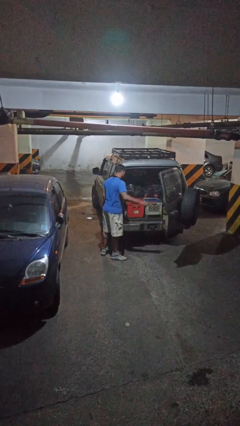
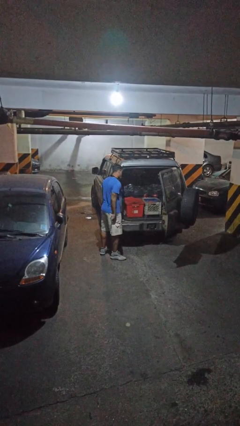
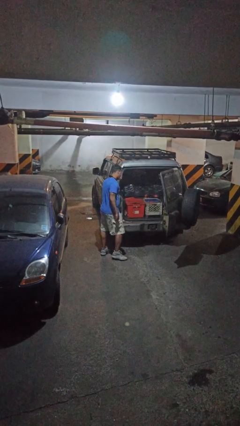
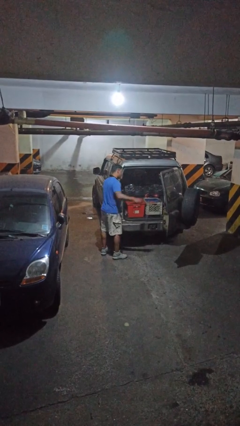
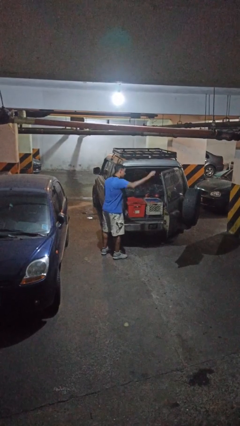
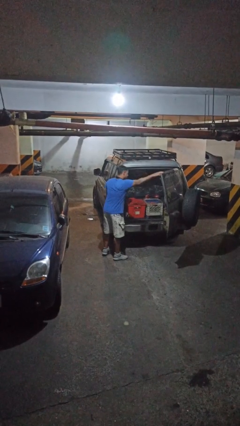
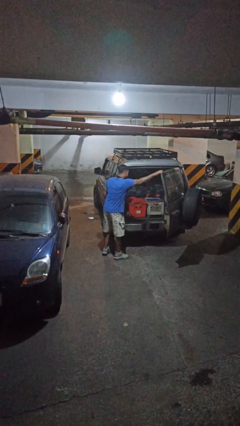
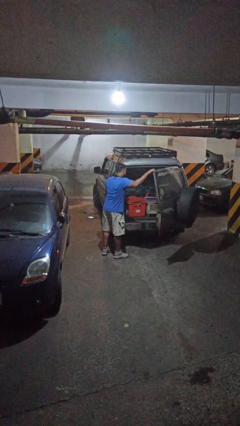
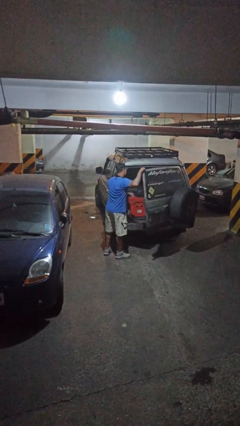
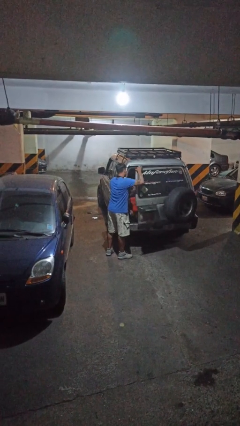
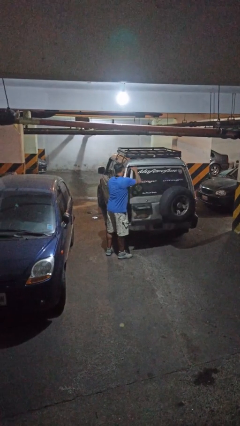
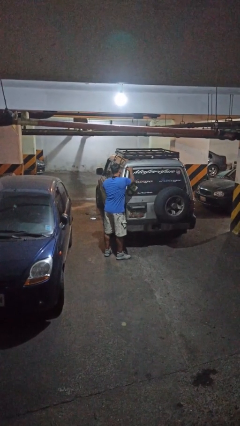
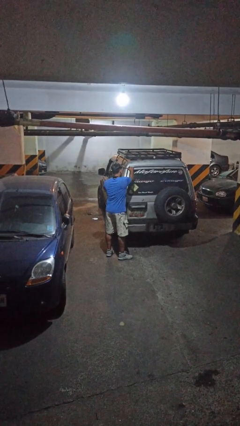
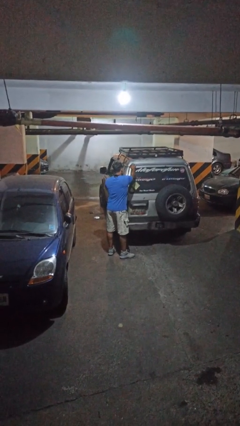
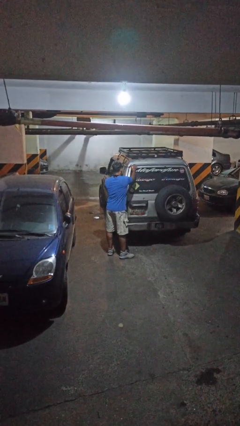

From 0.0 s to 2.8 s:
person closes car trunk

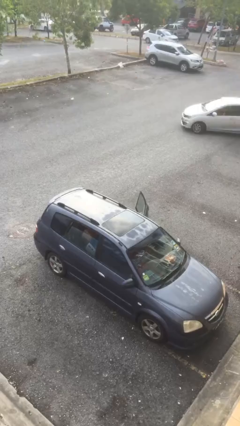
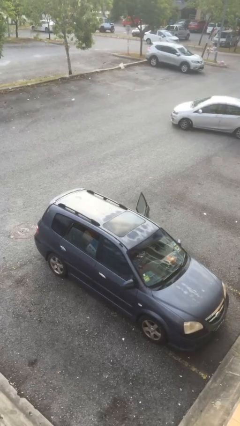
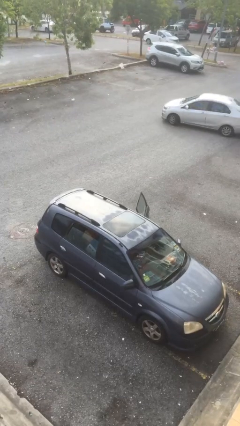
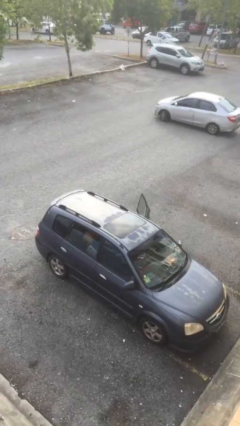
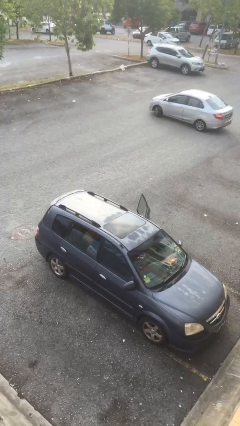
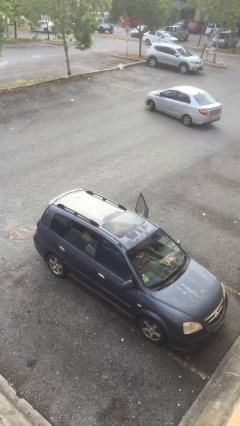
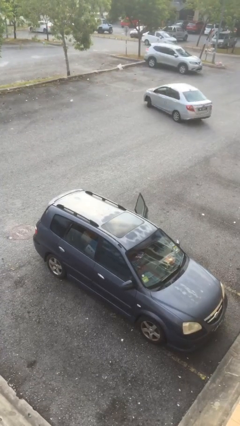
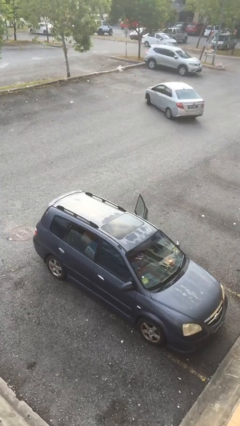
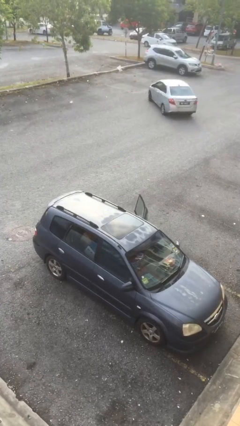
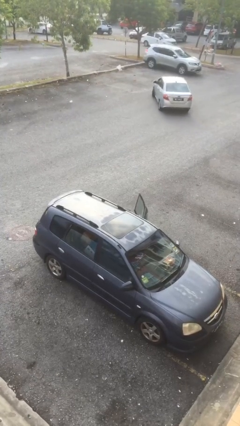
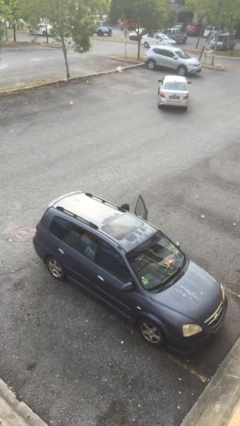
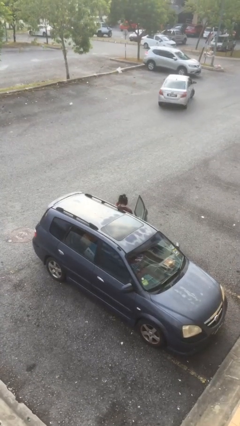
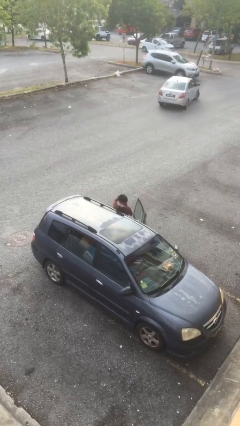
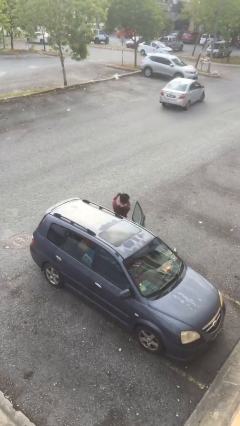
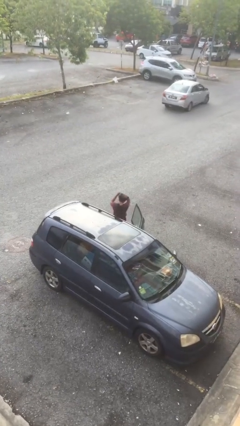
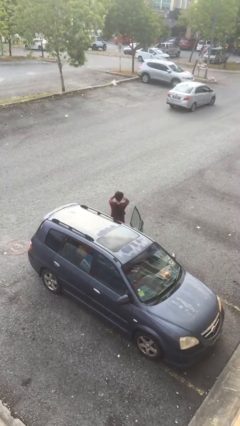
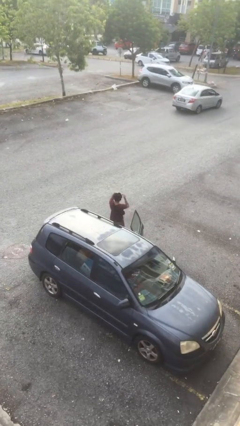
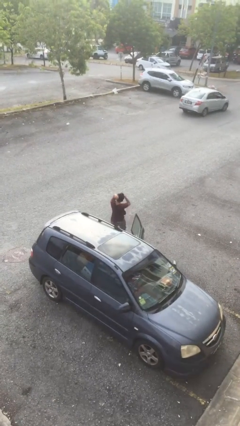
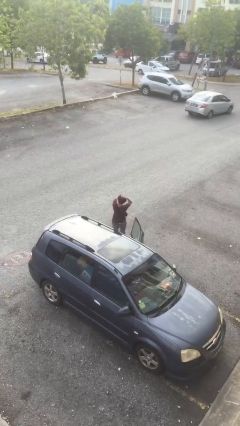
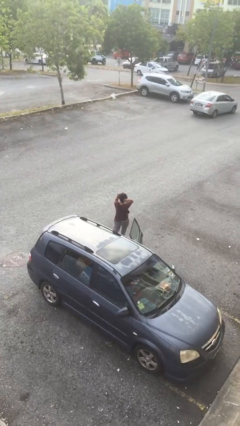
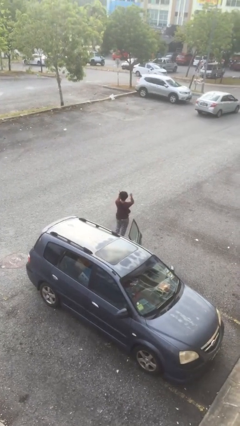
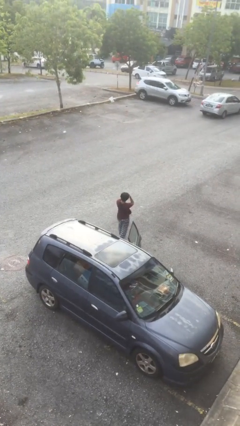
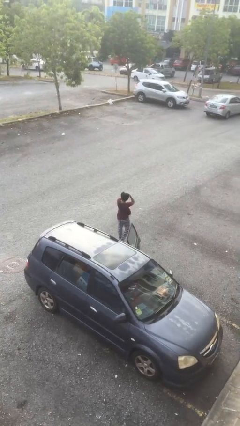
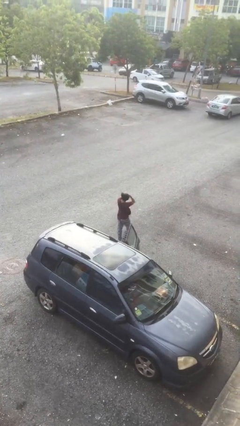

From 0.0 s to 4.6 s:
person exits car

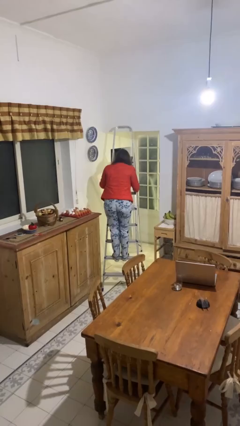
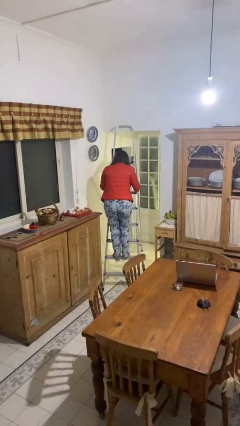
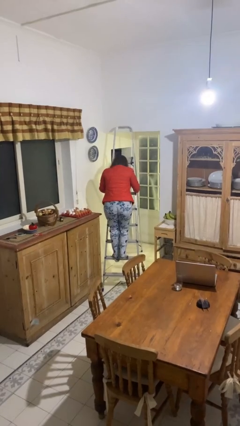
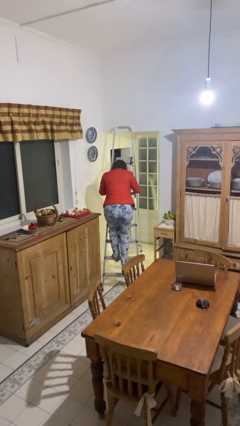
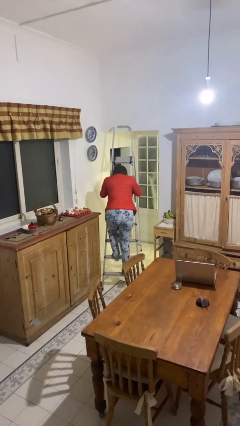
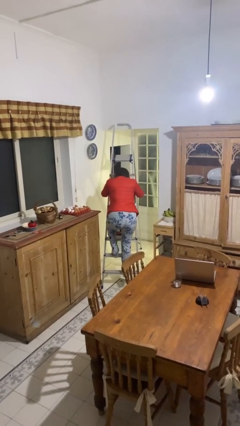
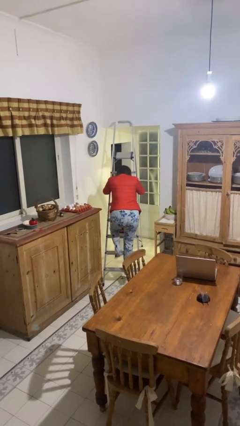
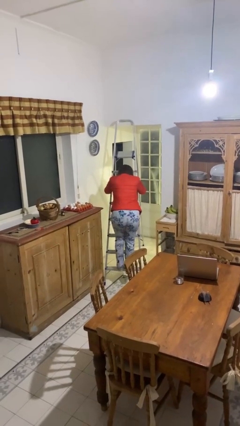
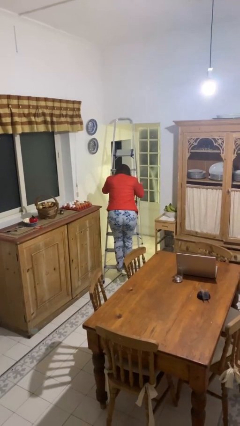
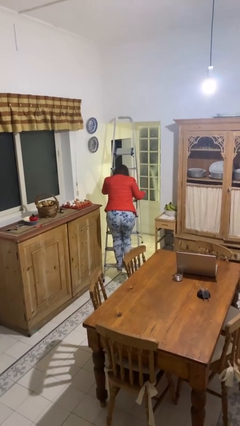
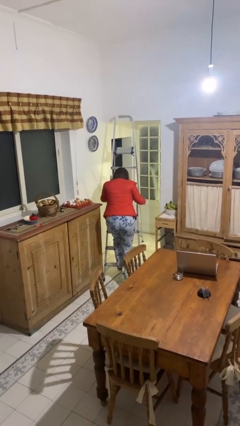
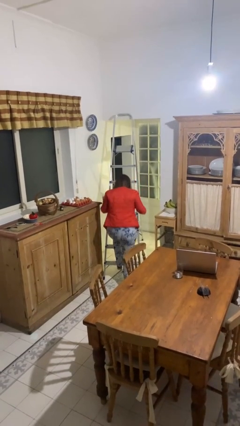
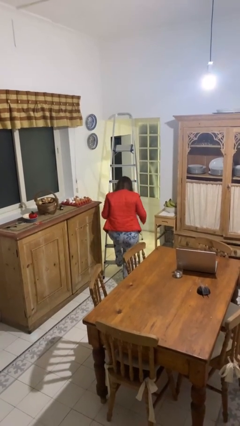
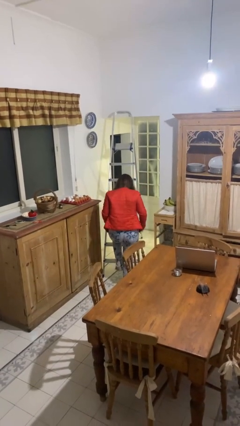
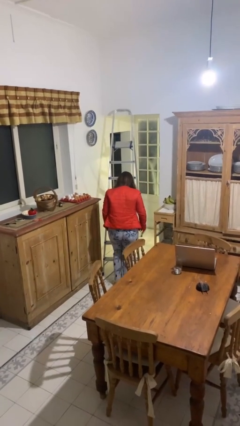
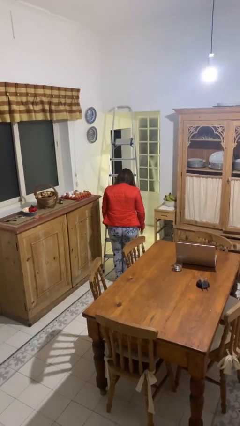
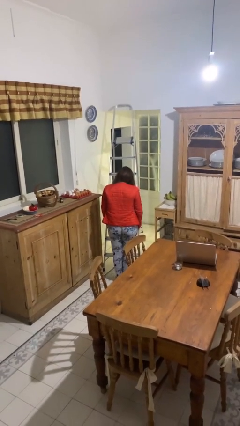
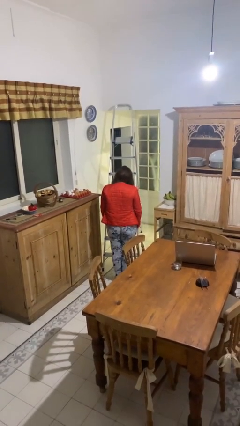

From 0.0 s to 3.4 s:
person climbs down ladder

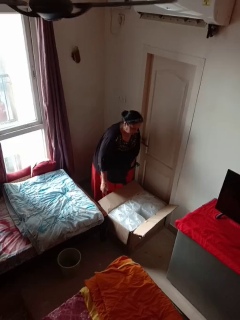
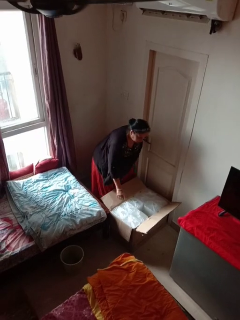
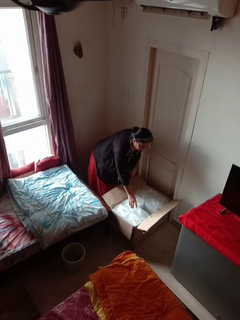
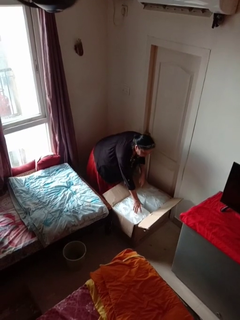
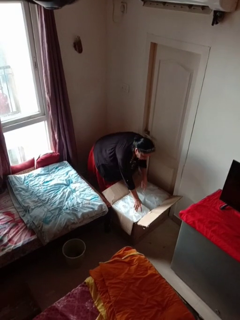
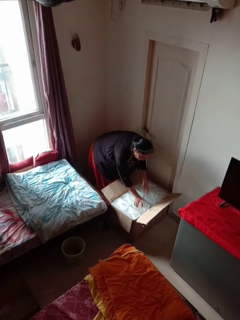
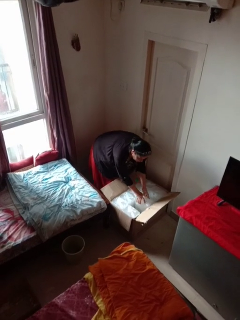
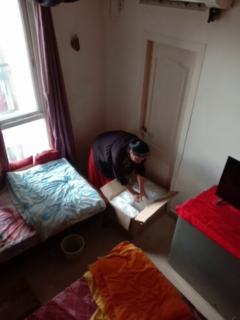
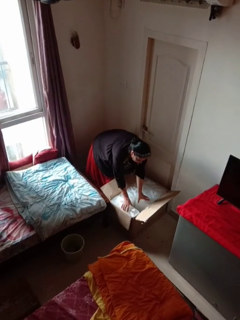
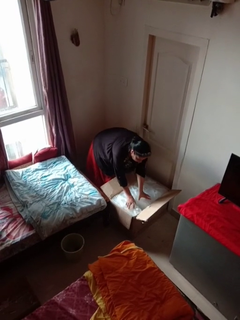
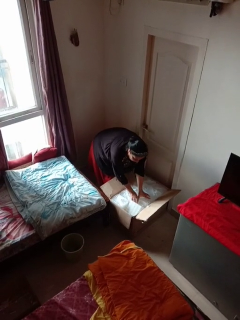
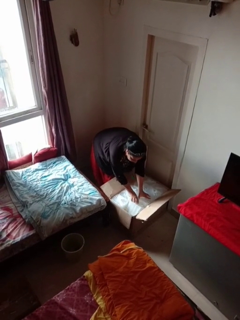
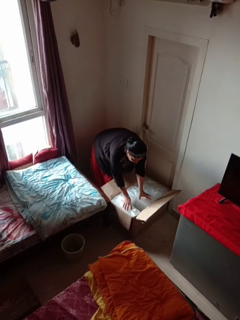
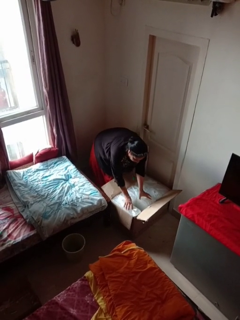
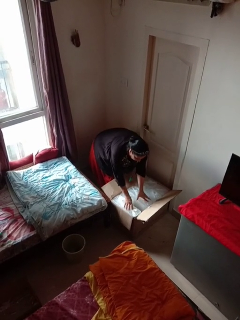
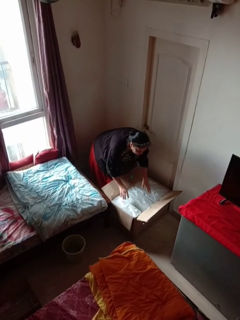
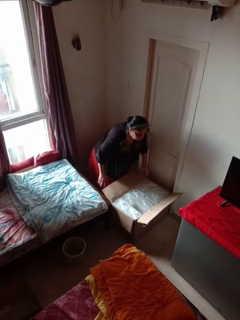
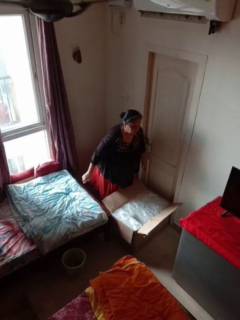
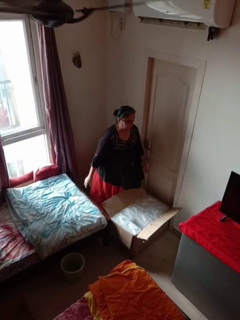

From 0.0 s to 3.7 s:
person searches in box

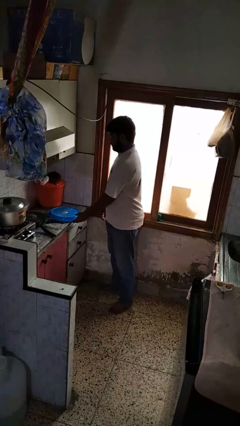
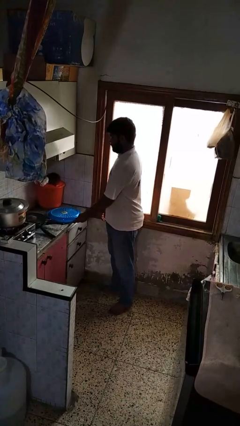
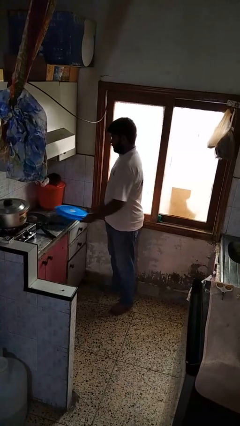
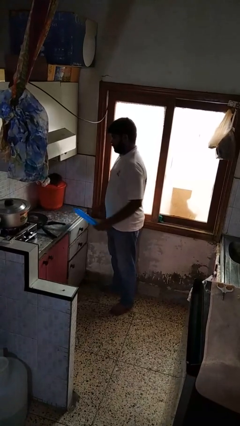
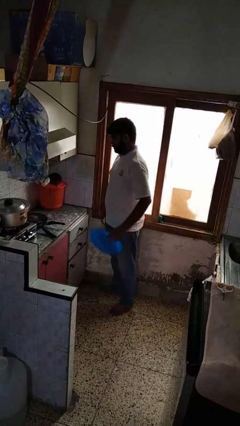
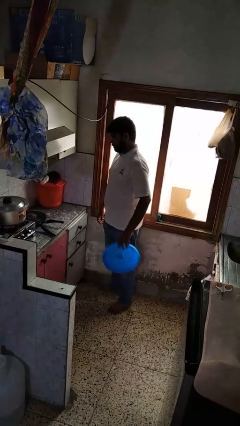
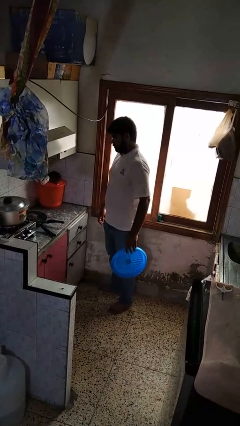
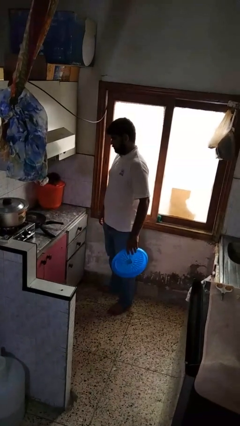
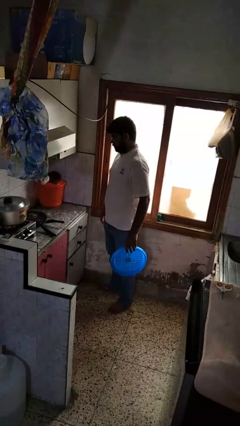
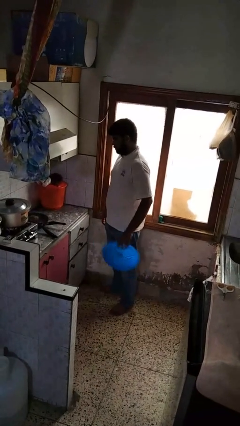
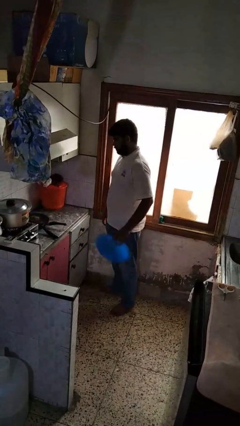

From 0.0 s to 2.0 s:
person picks up object from countertop

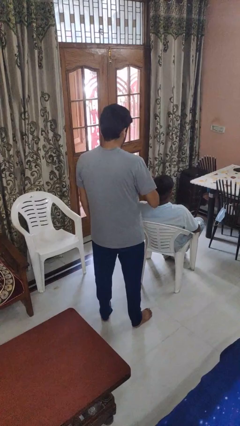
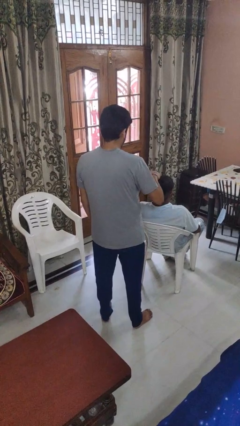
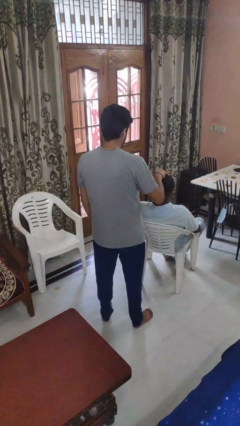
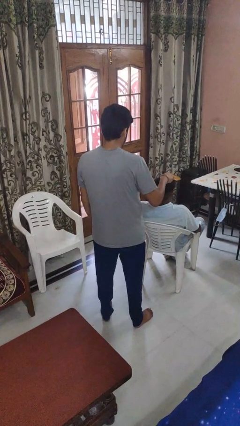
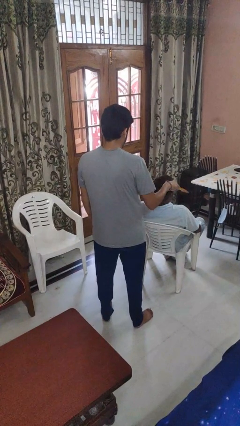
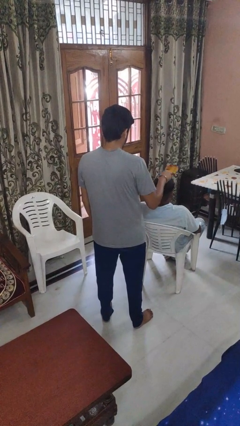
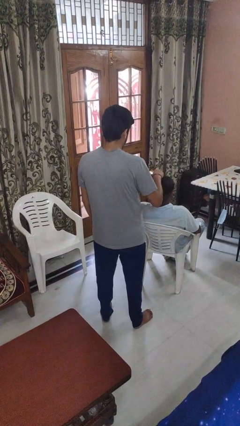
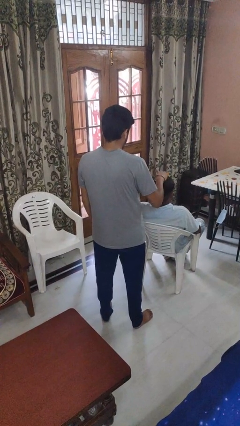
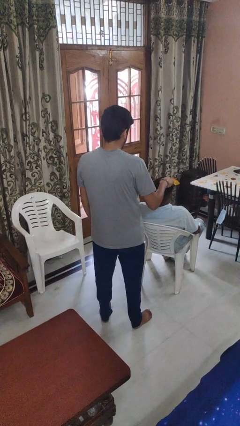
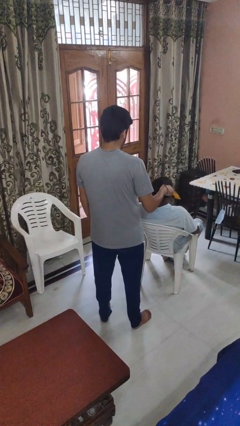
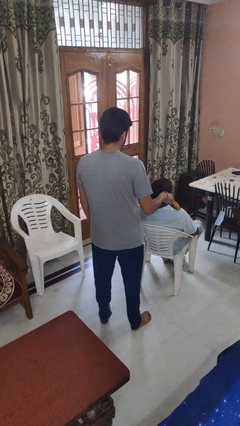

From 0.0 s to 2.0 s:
person brushes hair of person
